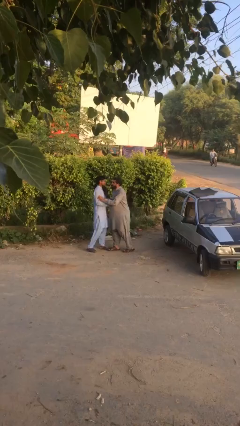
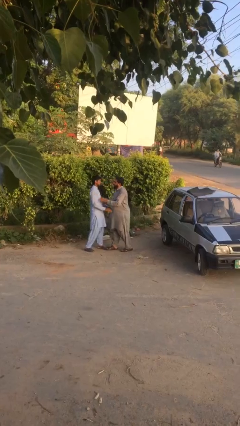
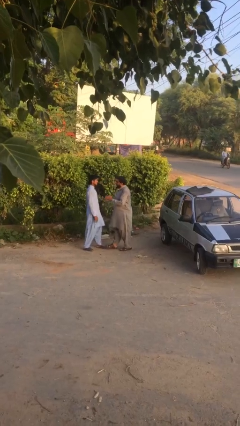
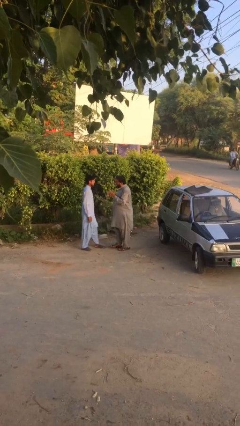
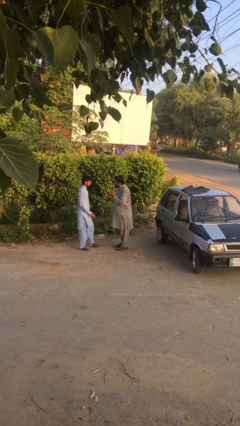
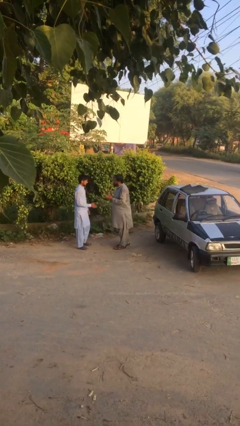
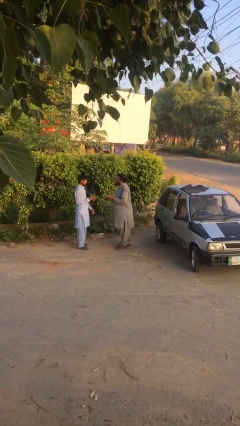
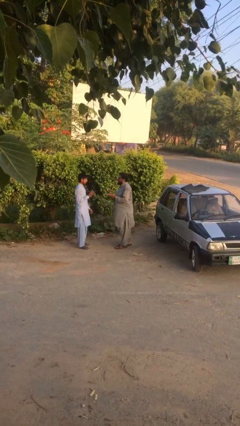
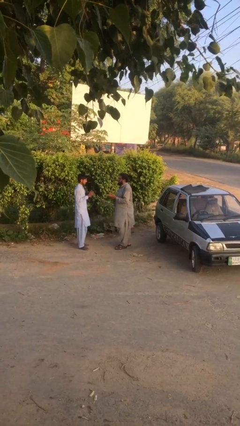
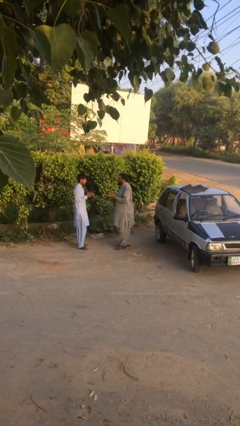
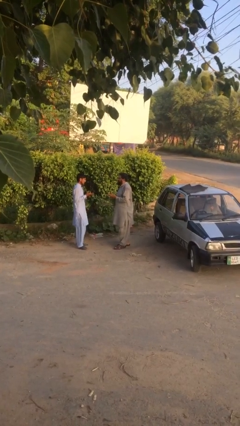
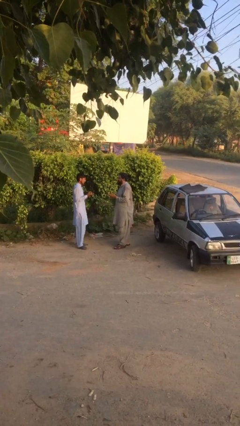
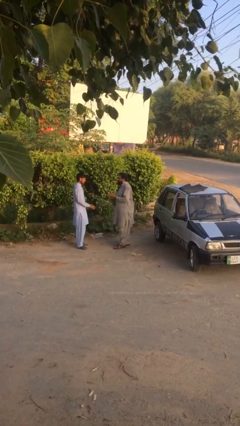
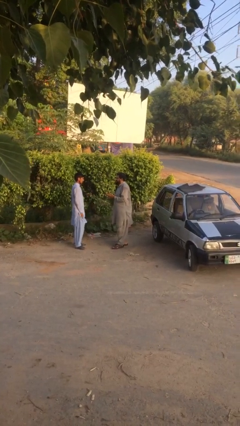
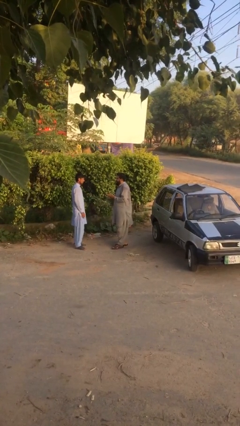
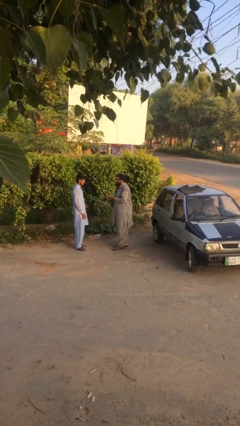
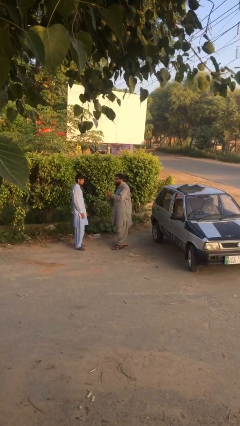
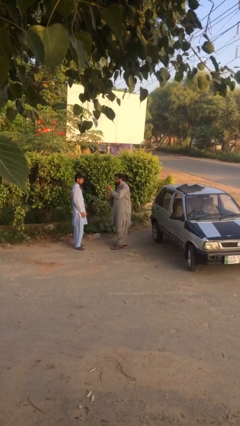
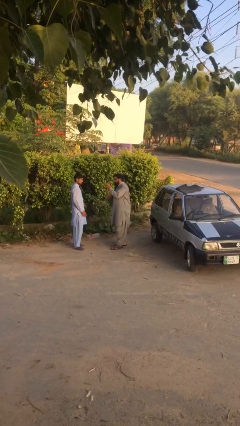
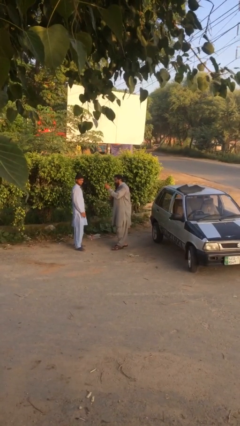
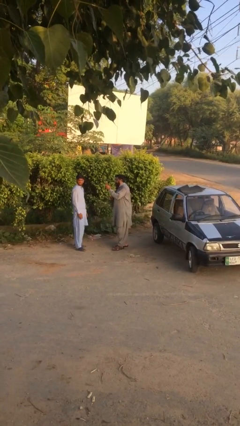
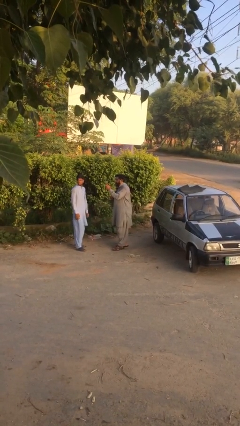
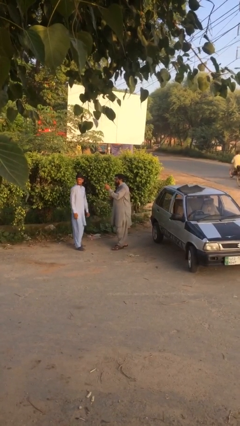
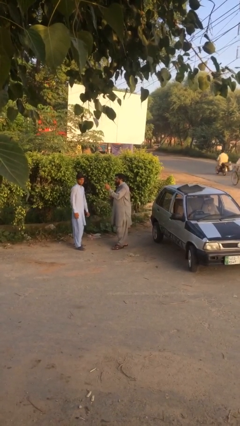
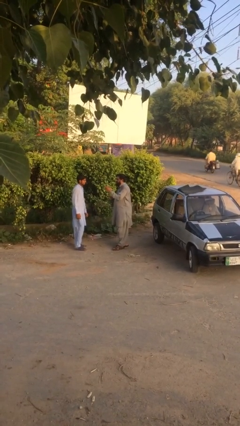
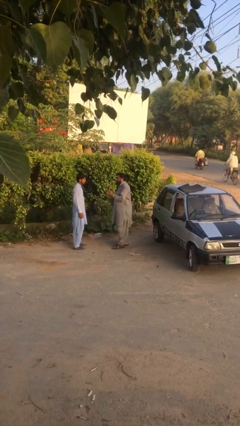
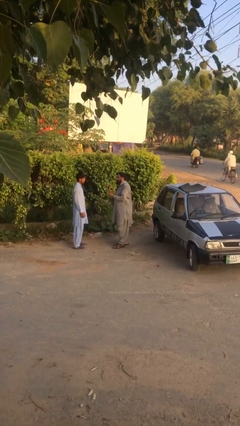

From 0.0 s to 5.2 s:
person talks to person

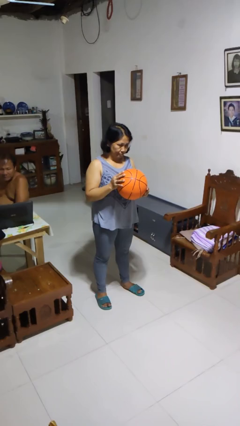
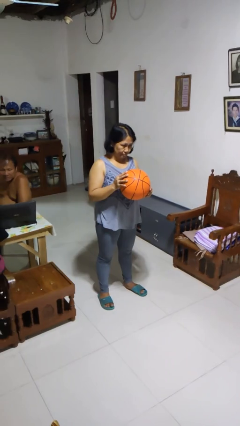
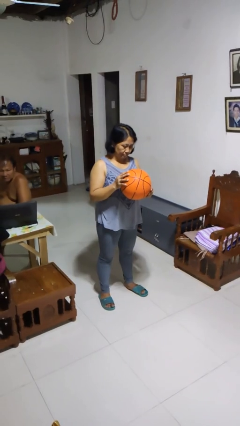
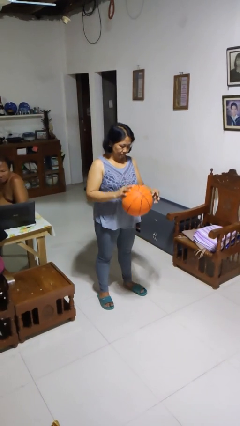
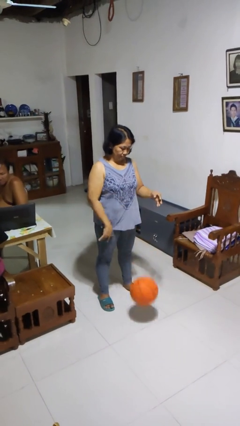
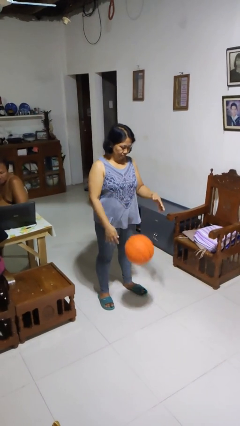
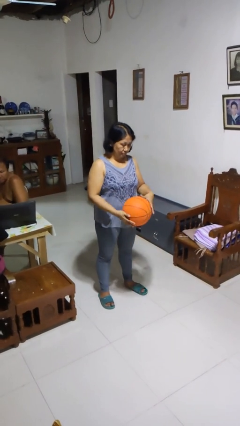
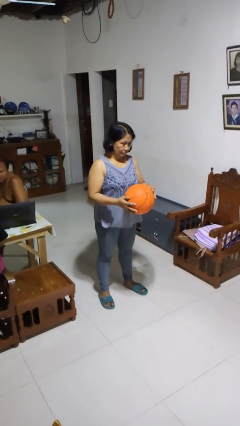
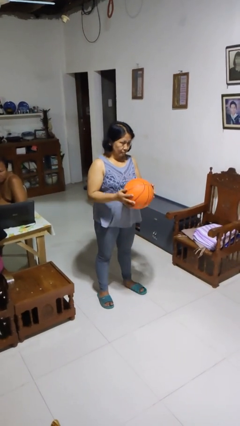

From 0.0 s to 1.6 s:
person bounces ball on floor

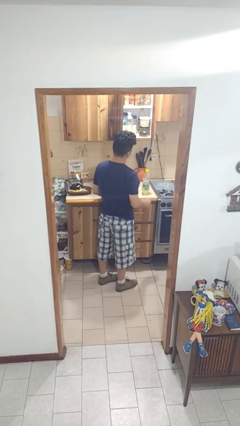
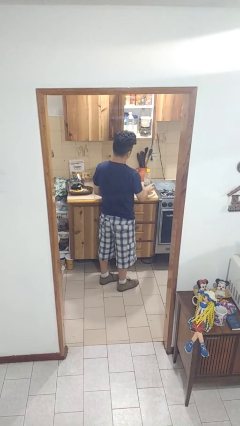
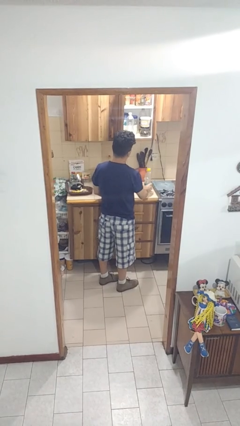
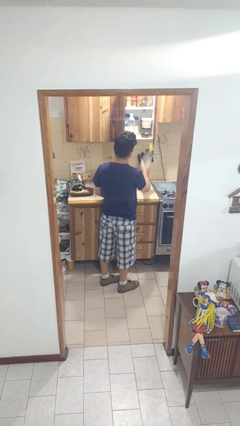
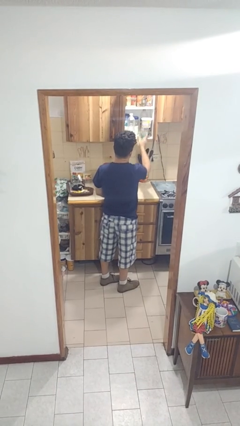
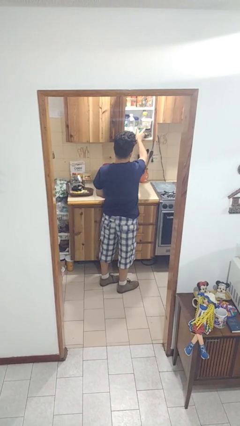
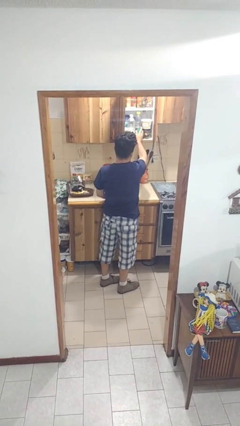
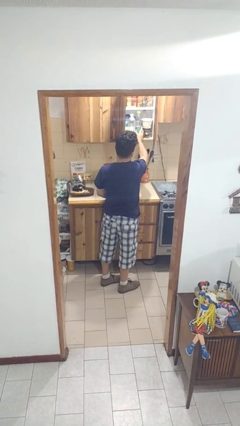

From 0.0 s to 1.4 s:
person puts object in cabinet

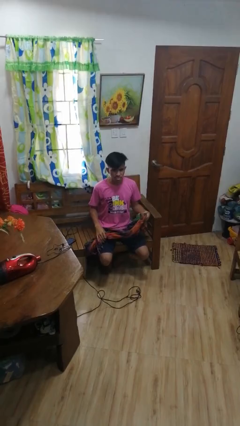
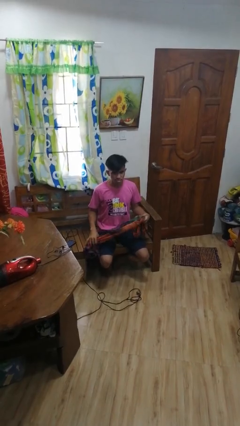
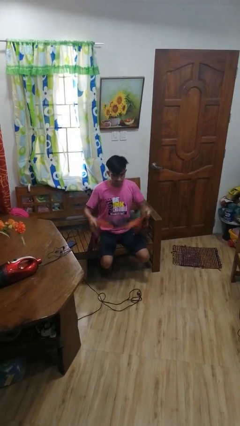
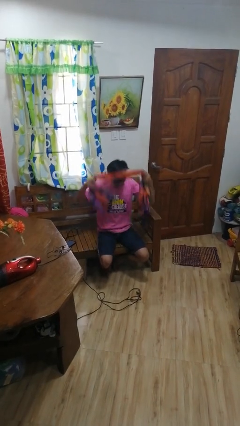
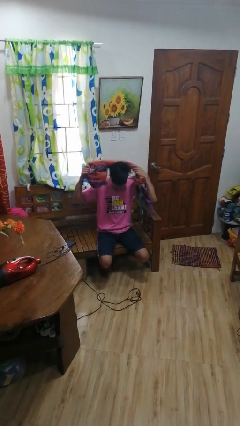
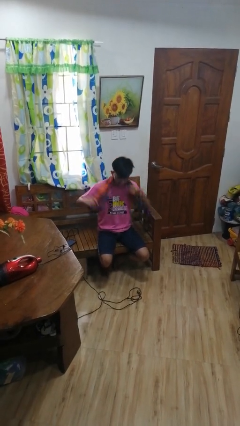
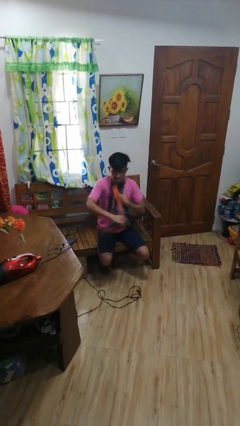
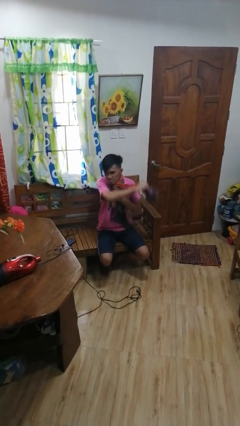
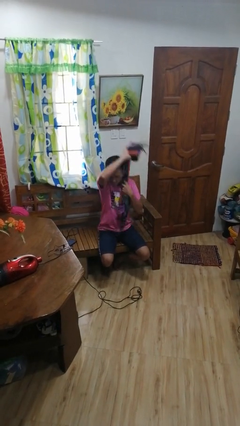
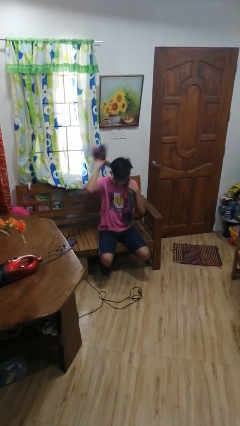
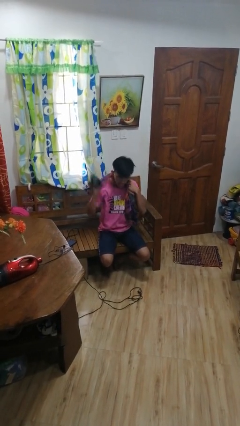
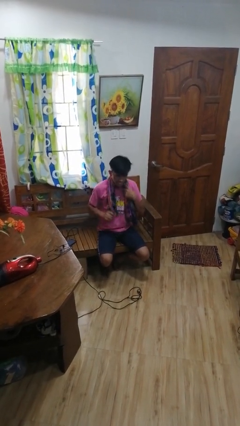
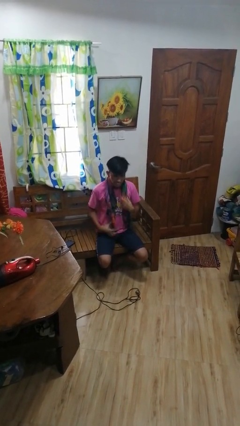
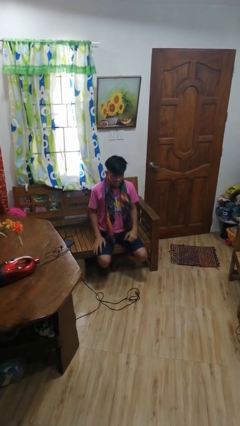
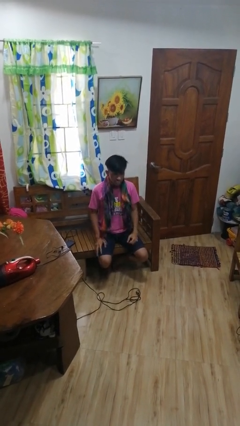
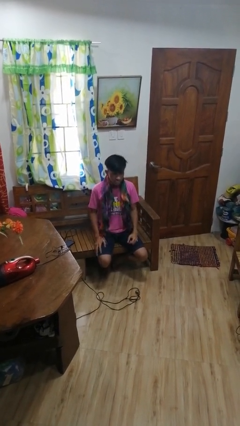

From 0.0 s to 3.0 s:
person puts on scarf

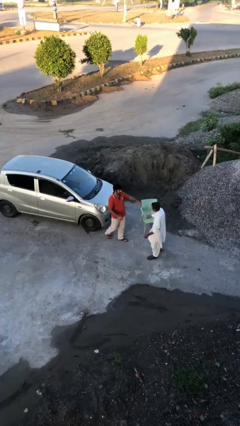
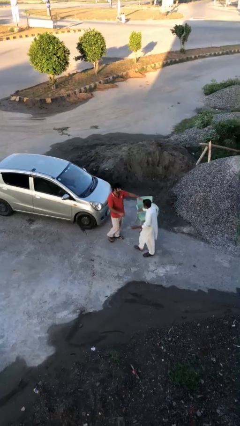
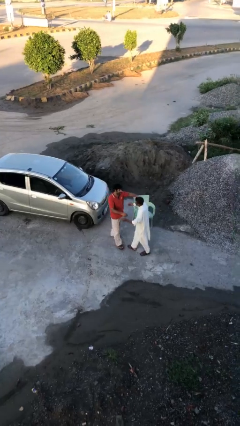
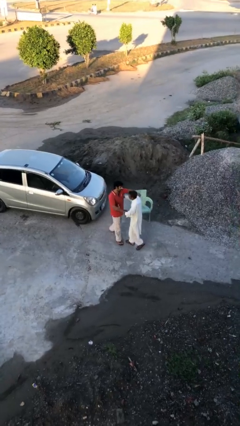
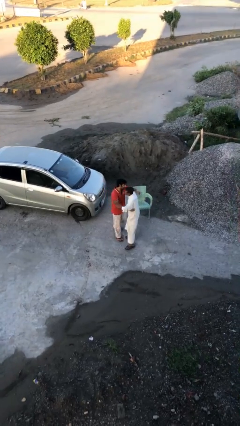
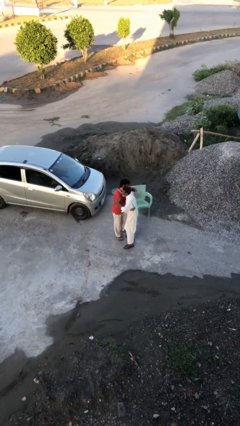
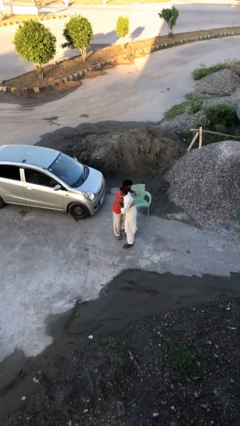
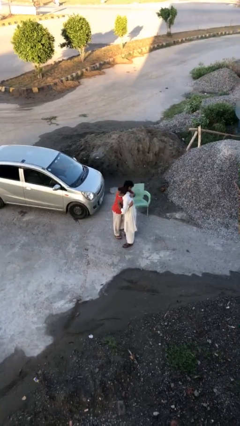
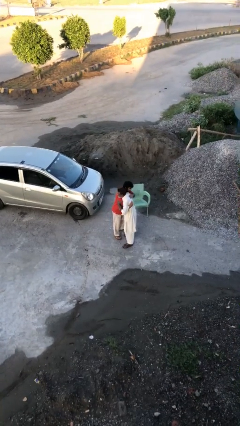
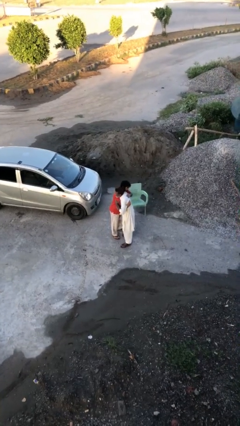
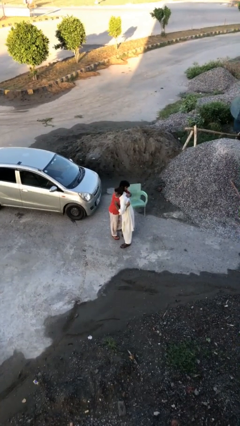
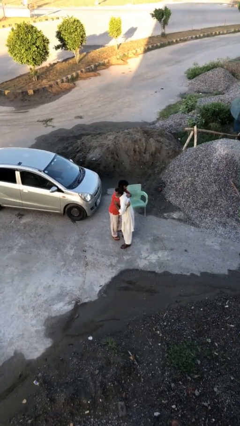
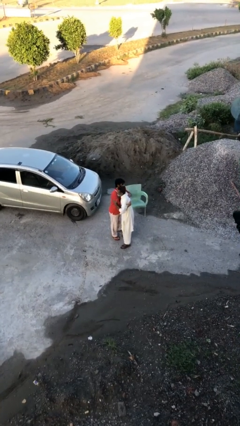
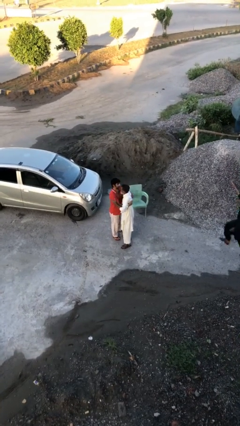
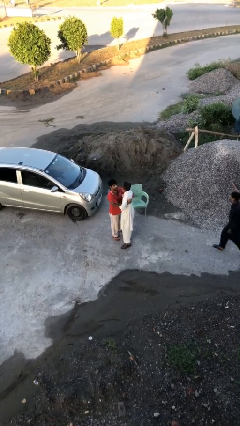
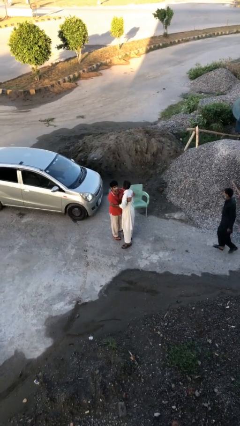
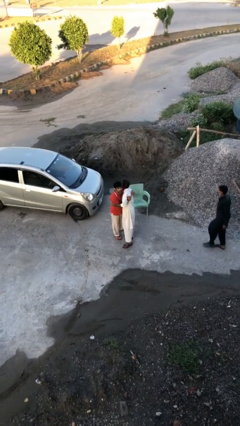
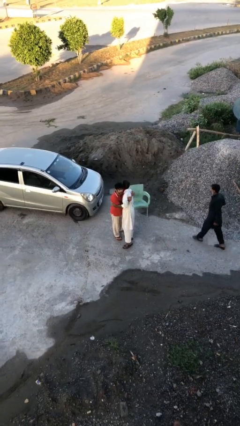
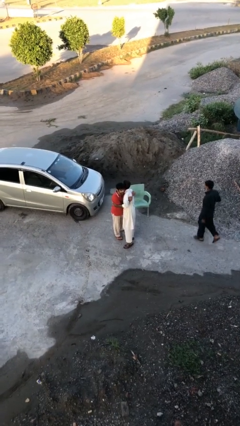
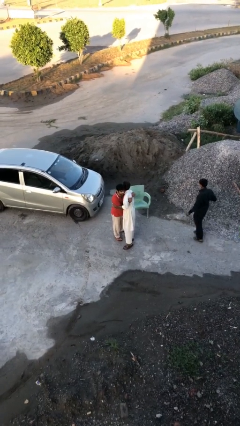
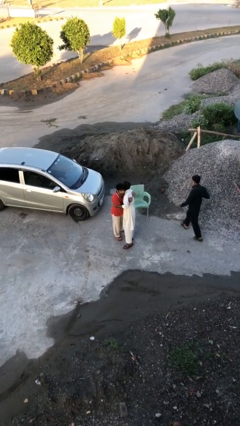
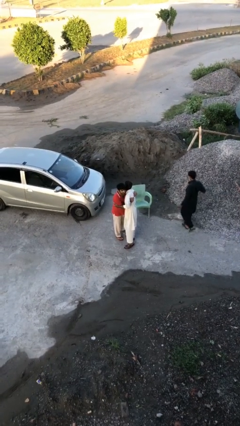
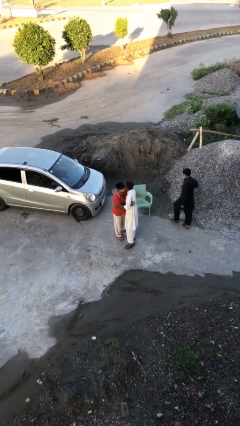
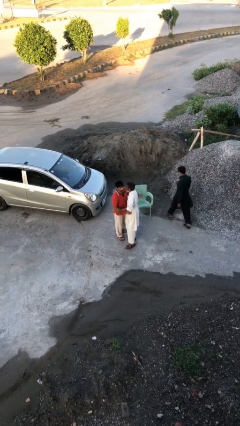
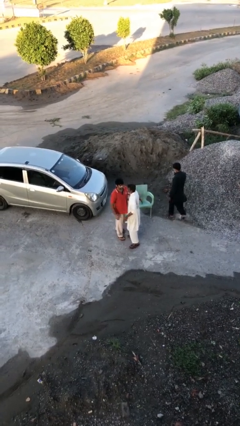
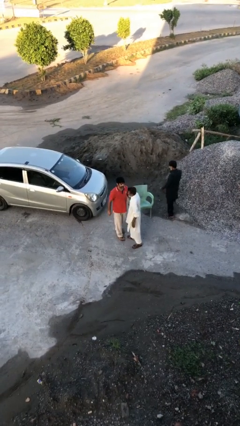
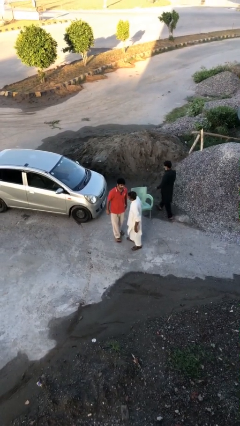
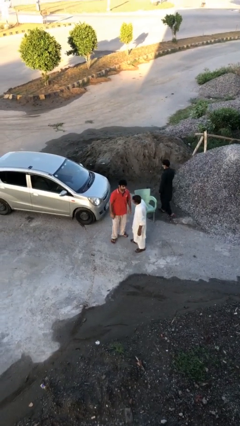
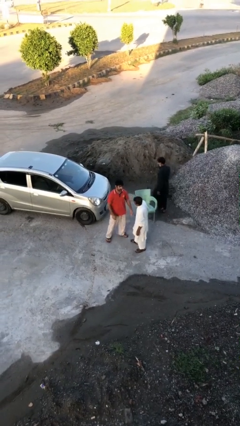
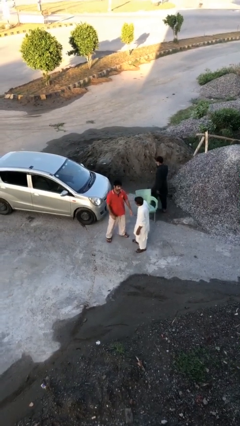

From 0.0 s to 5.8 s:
person embraces person

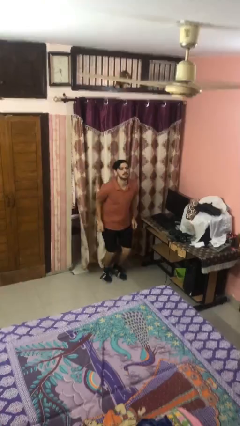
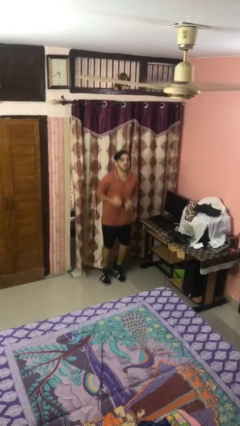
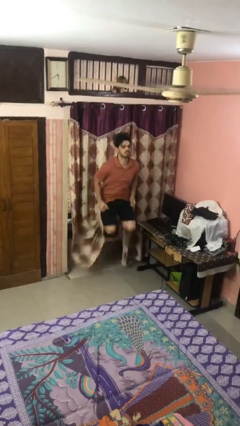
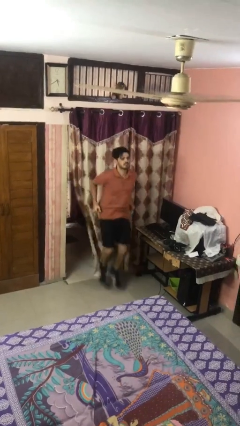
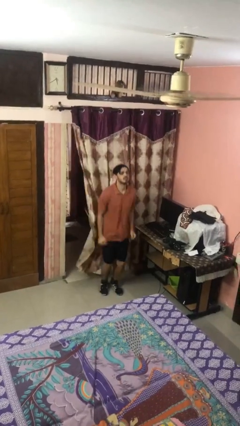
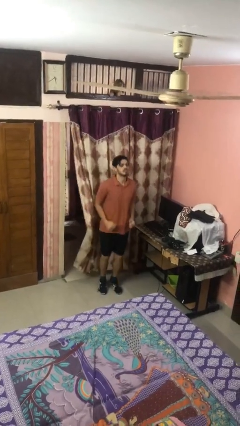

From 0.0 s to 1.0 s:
person jumps
